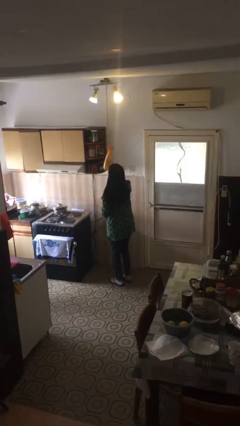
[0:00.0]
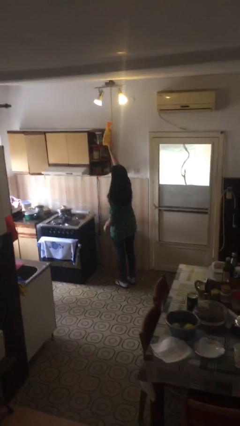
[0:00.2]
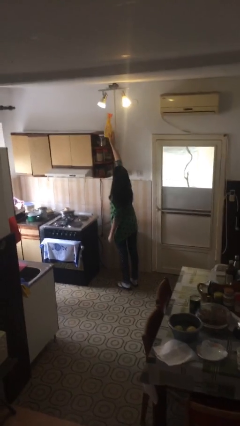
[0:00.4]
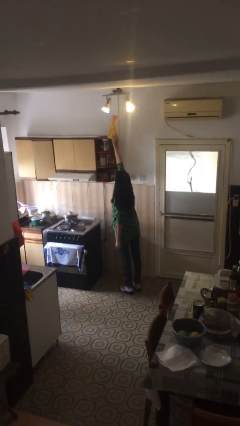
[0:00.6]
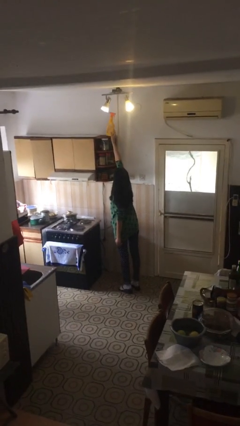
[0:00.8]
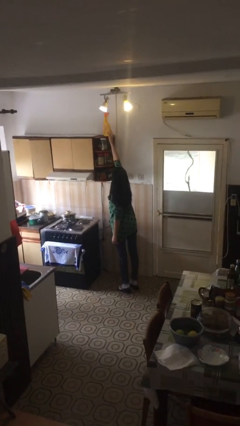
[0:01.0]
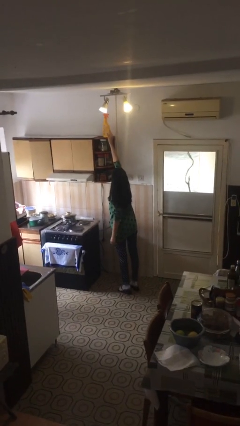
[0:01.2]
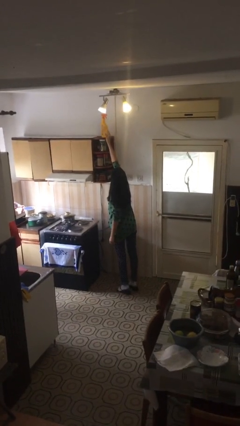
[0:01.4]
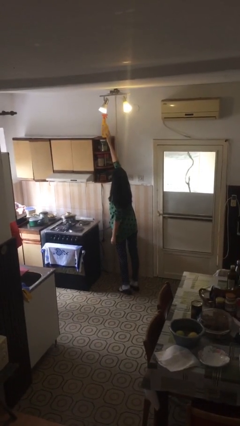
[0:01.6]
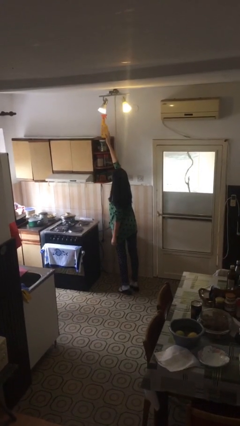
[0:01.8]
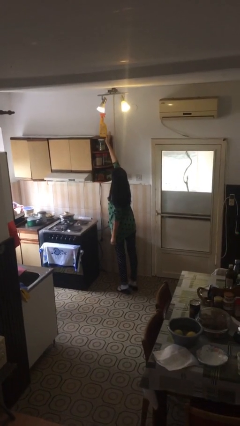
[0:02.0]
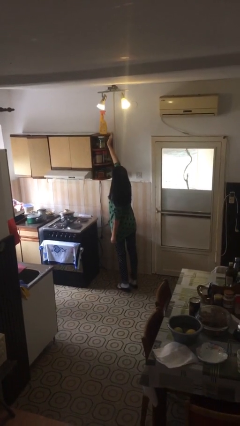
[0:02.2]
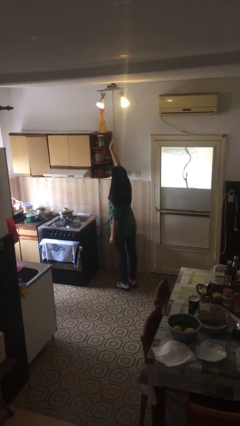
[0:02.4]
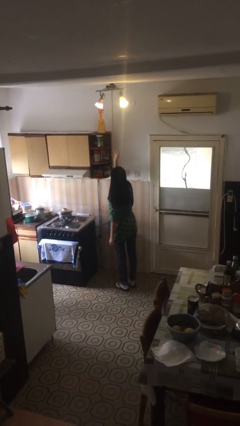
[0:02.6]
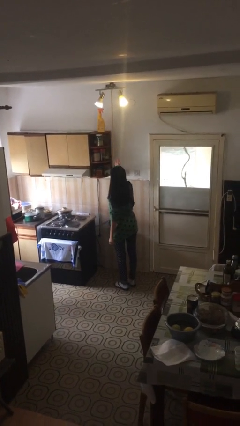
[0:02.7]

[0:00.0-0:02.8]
person puts down object on shelf

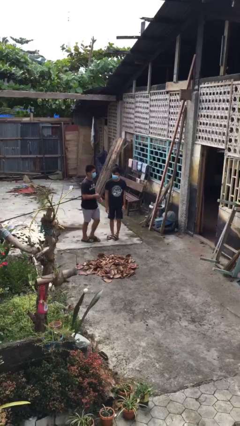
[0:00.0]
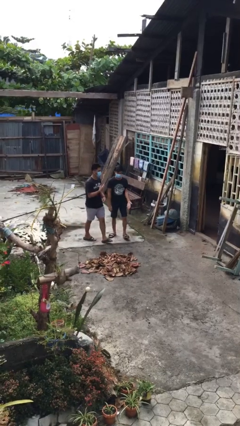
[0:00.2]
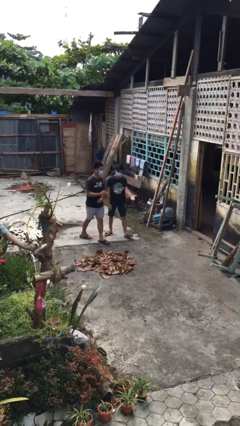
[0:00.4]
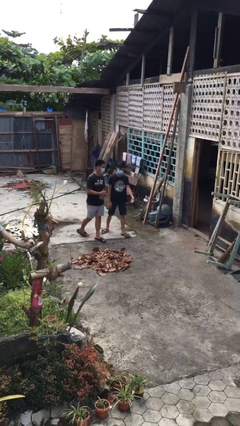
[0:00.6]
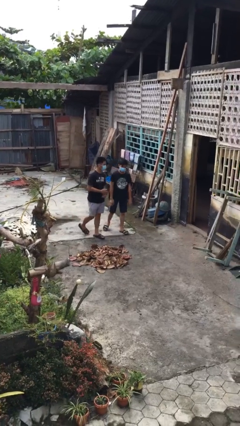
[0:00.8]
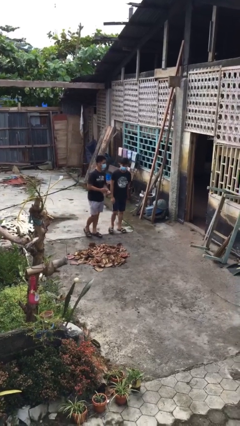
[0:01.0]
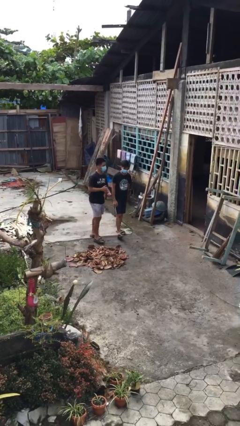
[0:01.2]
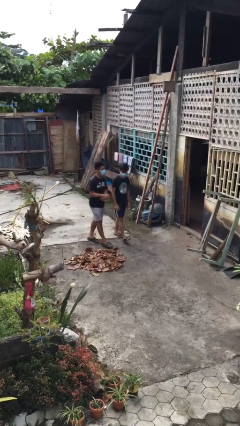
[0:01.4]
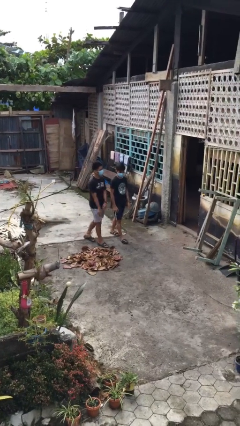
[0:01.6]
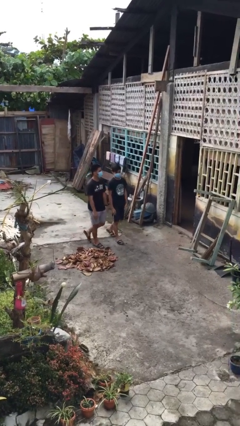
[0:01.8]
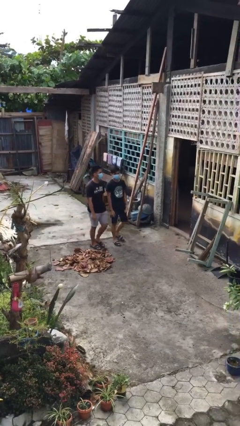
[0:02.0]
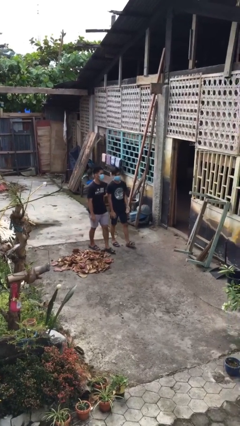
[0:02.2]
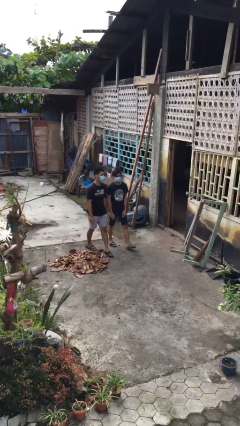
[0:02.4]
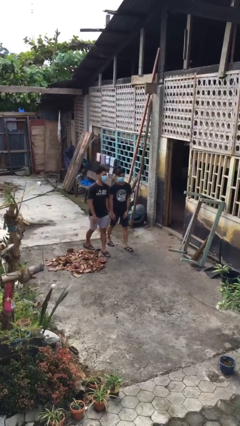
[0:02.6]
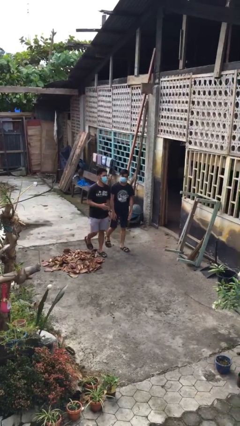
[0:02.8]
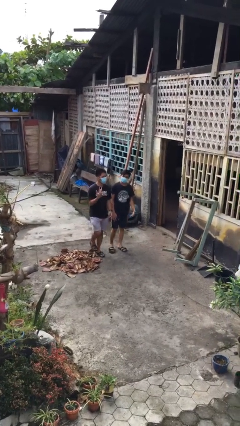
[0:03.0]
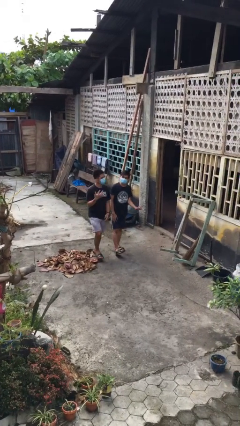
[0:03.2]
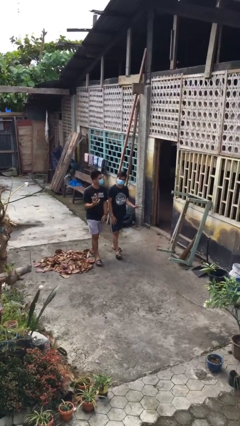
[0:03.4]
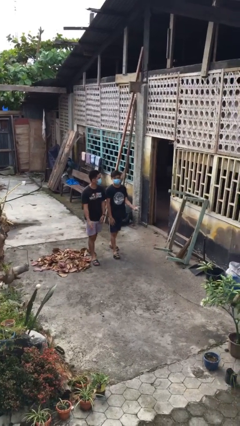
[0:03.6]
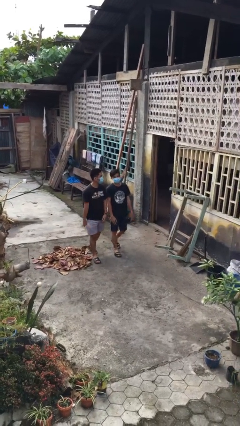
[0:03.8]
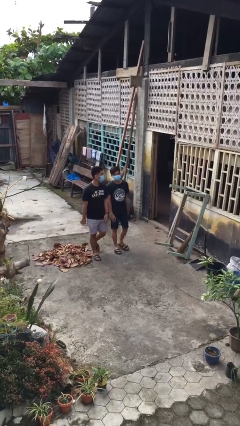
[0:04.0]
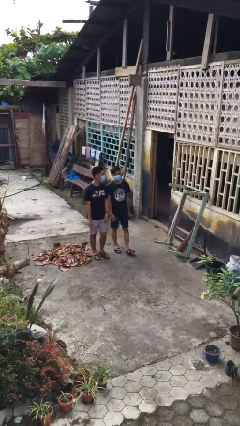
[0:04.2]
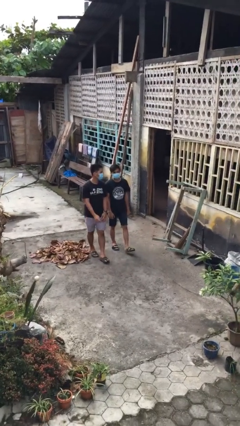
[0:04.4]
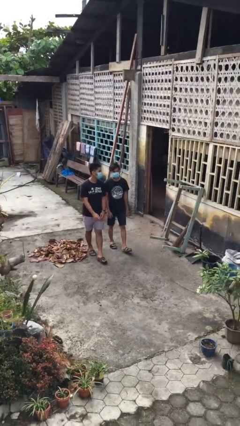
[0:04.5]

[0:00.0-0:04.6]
person talks to person

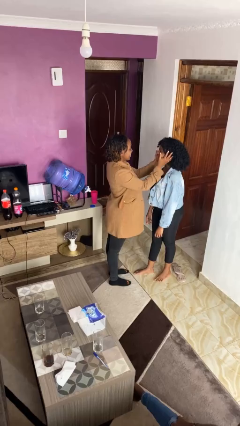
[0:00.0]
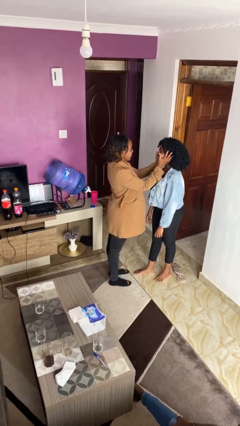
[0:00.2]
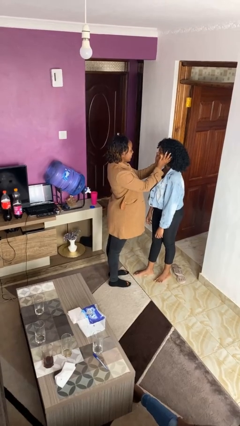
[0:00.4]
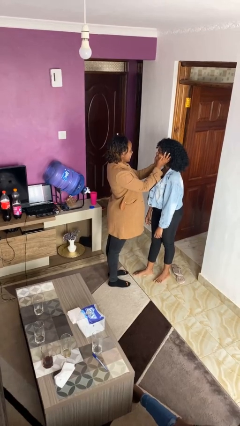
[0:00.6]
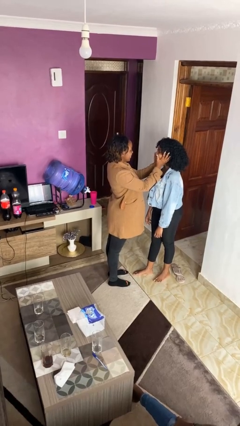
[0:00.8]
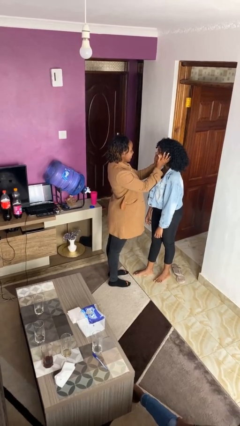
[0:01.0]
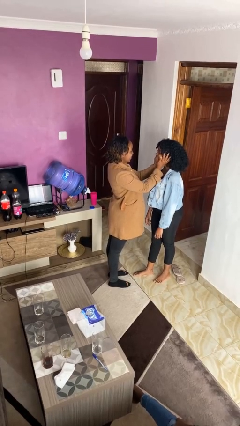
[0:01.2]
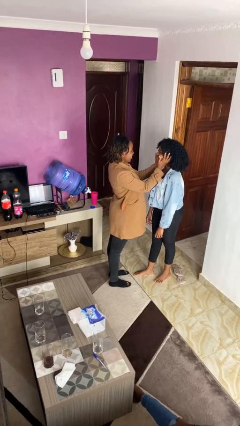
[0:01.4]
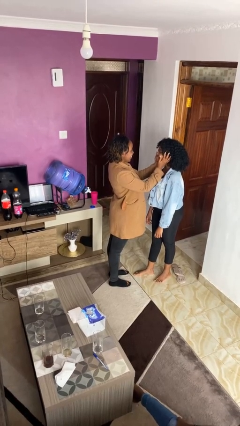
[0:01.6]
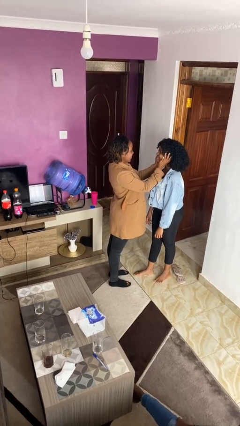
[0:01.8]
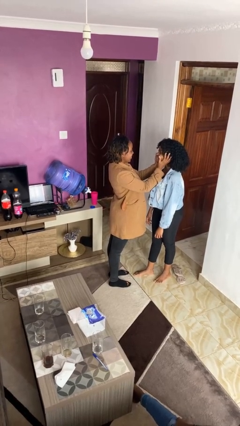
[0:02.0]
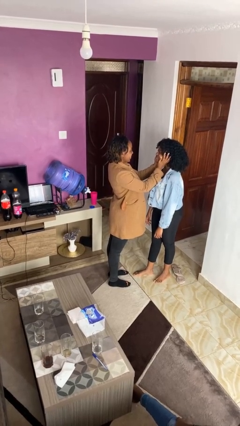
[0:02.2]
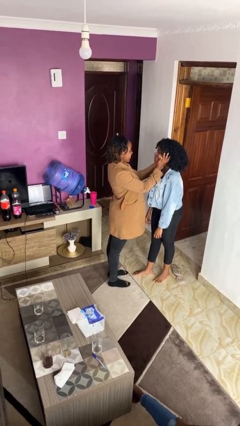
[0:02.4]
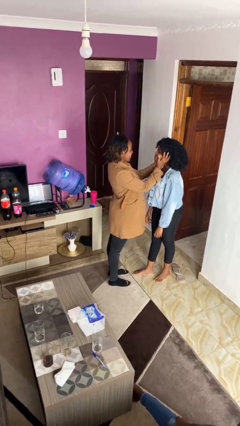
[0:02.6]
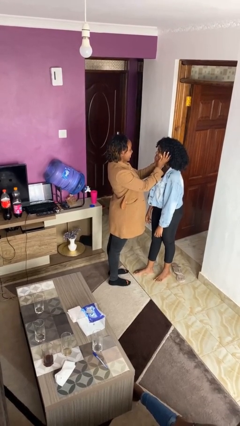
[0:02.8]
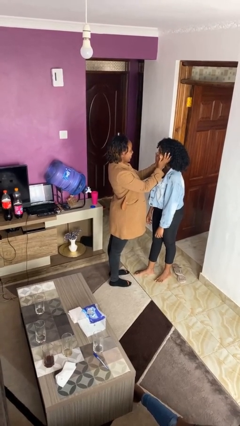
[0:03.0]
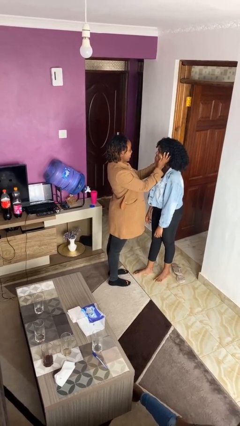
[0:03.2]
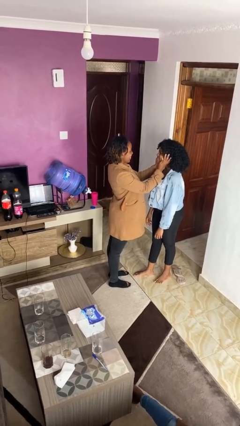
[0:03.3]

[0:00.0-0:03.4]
person touches face of person

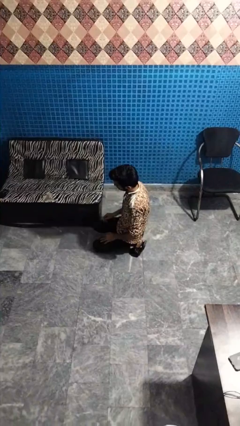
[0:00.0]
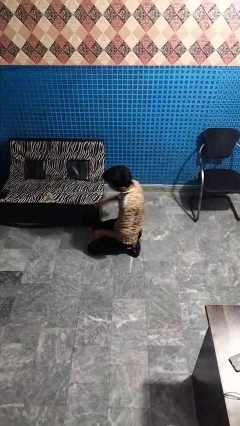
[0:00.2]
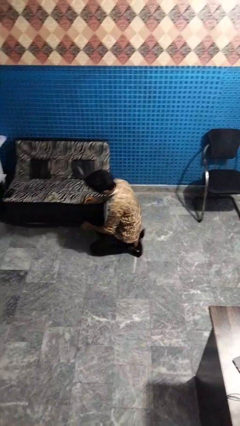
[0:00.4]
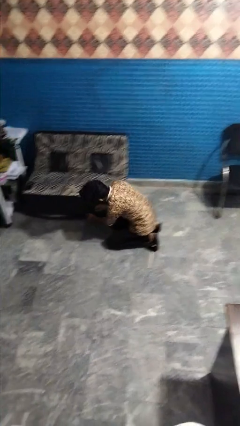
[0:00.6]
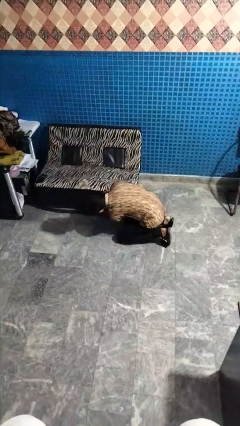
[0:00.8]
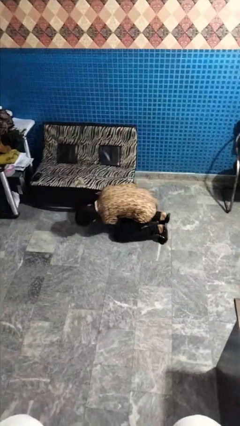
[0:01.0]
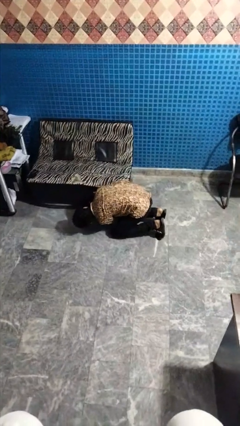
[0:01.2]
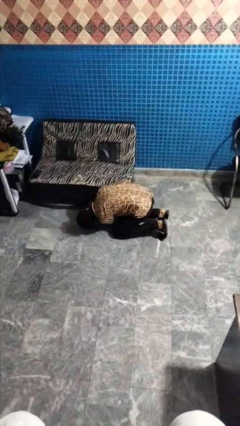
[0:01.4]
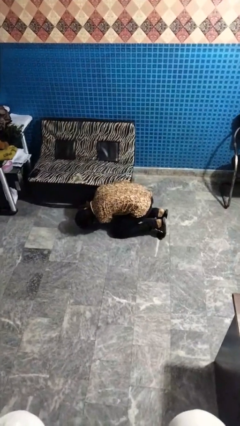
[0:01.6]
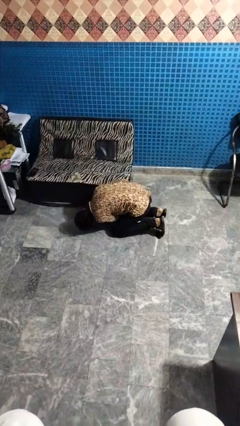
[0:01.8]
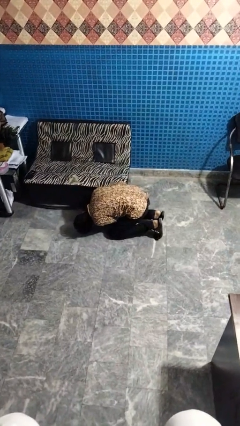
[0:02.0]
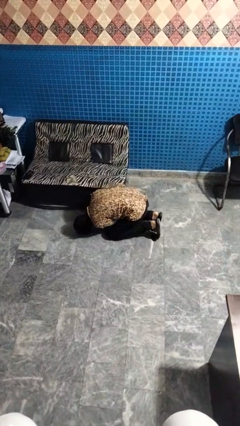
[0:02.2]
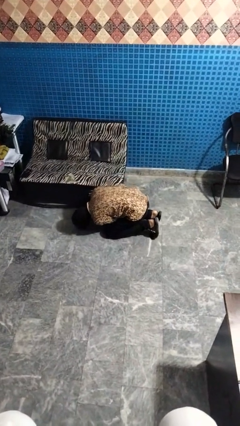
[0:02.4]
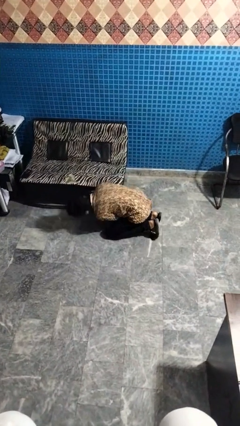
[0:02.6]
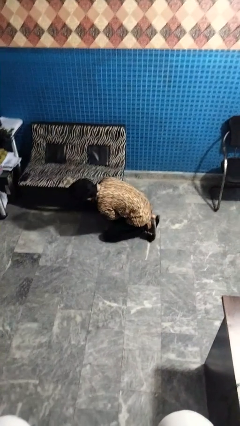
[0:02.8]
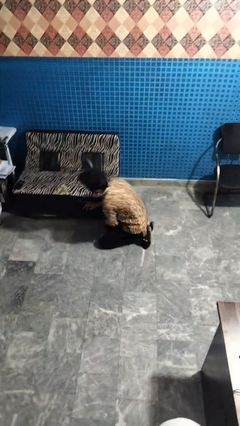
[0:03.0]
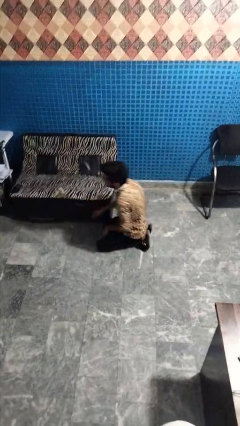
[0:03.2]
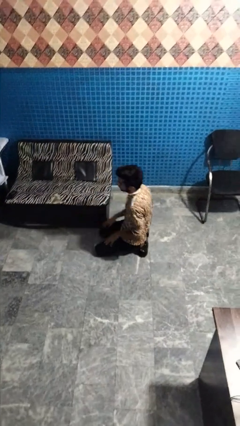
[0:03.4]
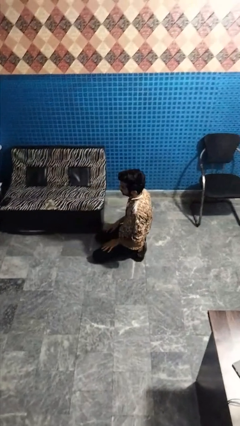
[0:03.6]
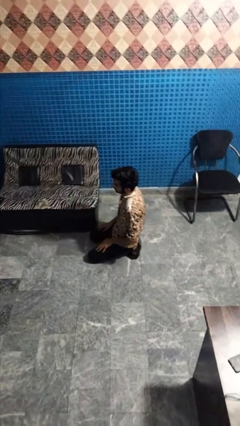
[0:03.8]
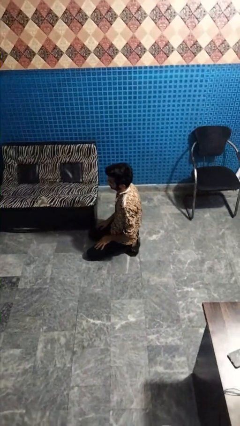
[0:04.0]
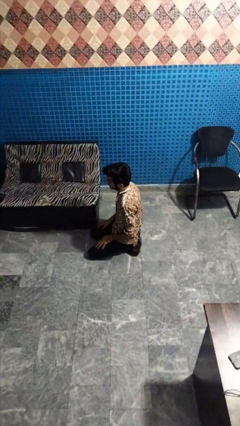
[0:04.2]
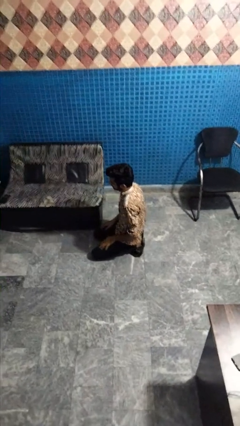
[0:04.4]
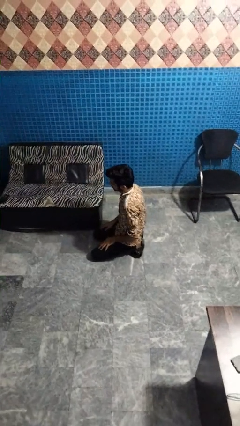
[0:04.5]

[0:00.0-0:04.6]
person searches under couch

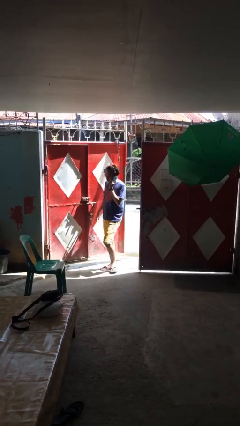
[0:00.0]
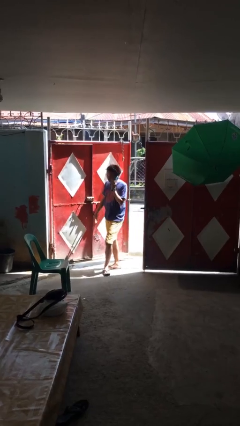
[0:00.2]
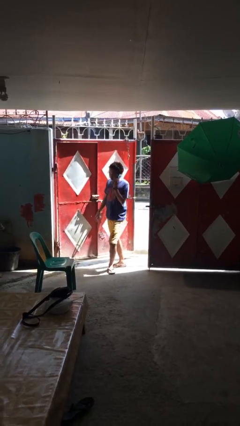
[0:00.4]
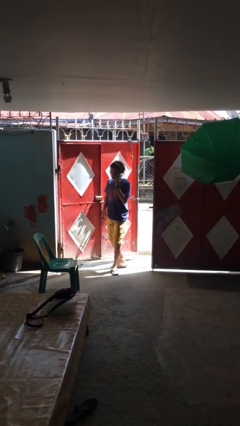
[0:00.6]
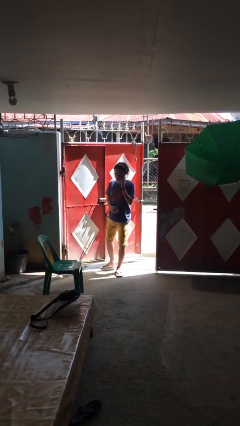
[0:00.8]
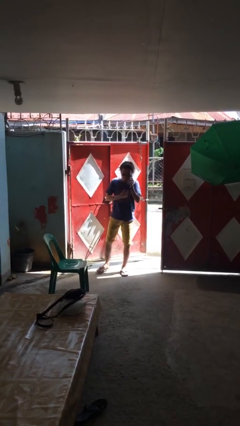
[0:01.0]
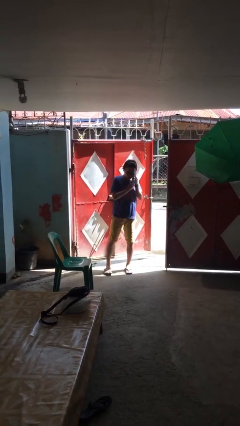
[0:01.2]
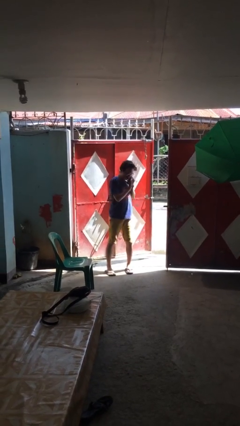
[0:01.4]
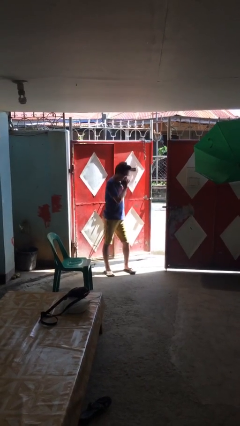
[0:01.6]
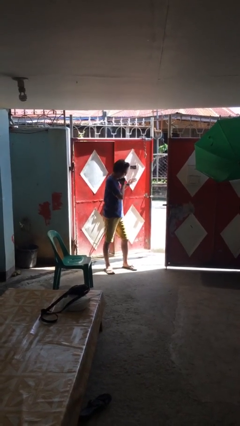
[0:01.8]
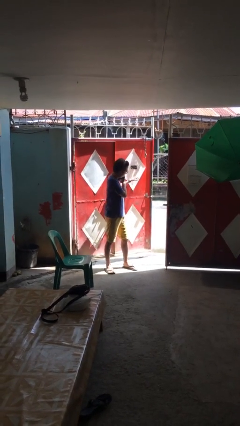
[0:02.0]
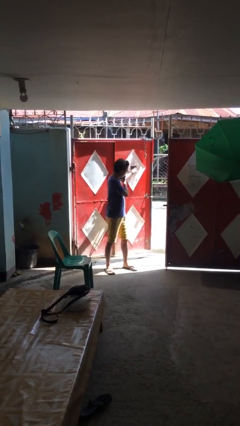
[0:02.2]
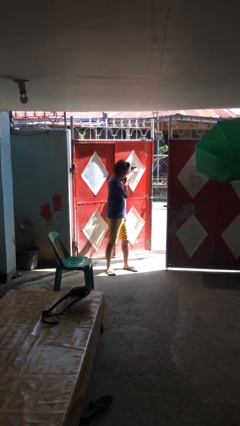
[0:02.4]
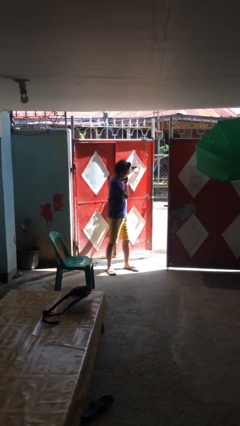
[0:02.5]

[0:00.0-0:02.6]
person enters scene through structure
